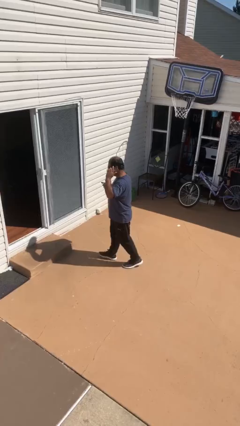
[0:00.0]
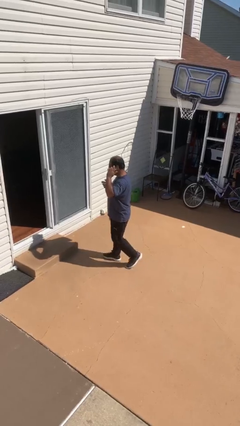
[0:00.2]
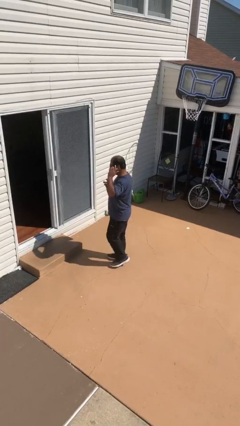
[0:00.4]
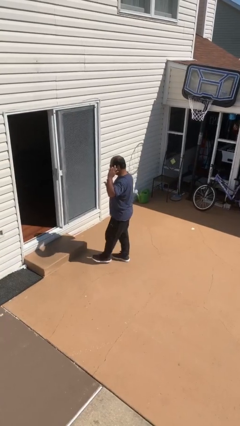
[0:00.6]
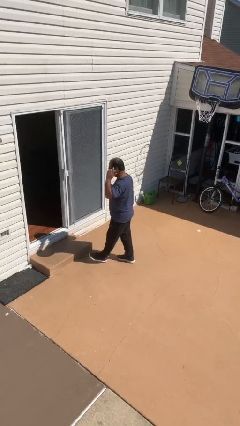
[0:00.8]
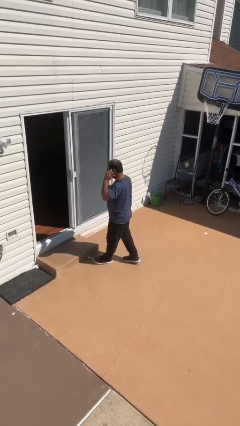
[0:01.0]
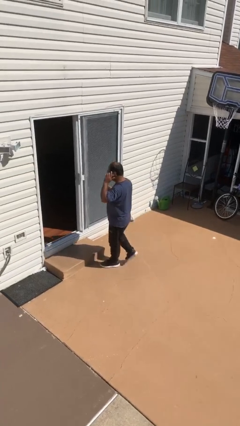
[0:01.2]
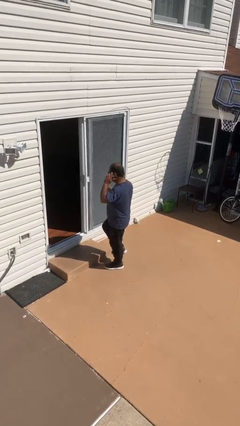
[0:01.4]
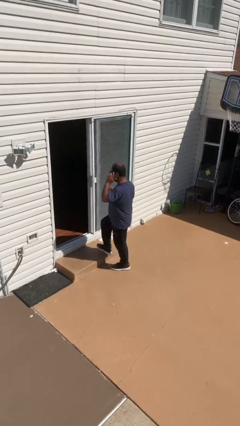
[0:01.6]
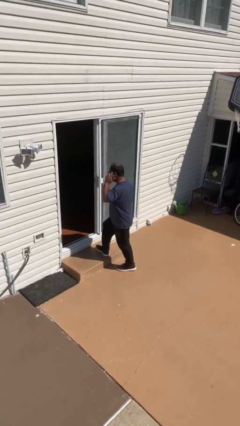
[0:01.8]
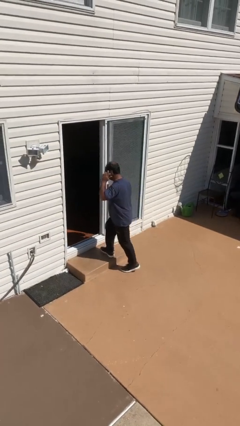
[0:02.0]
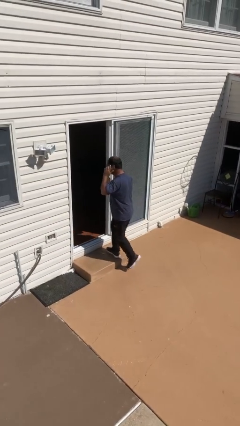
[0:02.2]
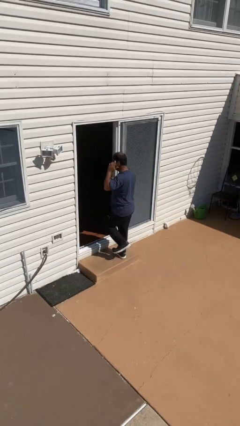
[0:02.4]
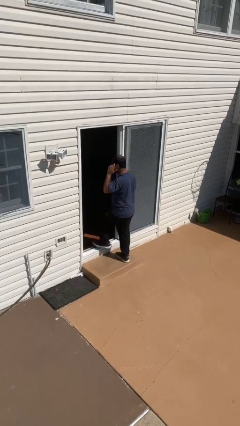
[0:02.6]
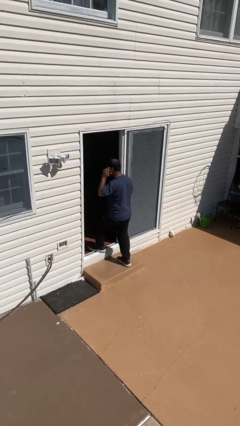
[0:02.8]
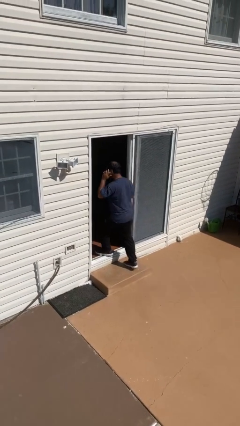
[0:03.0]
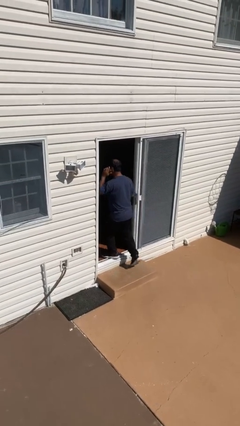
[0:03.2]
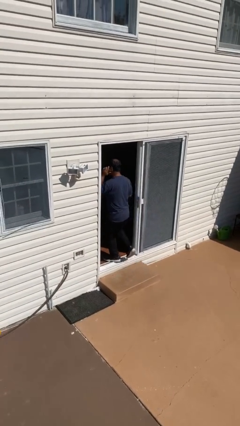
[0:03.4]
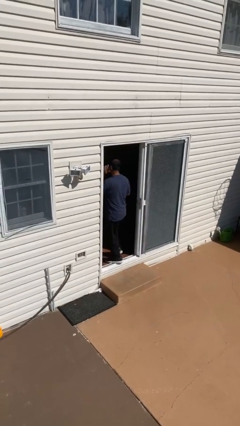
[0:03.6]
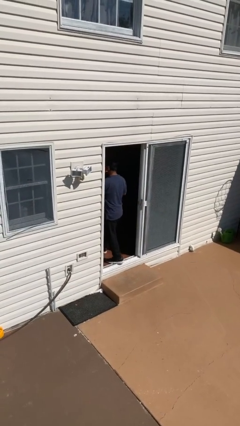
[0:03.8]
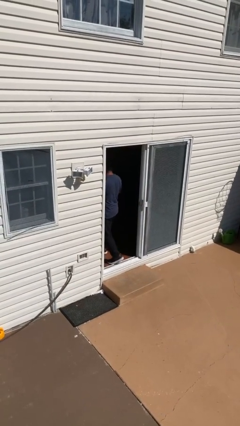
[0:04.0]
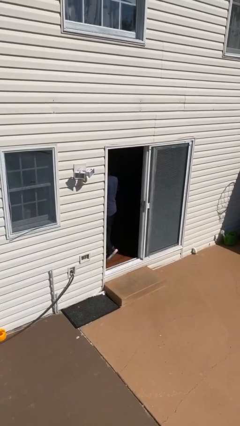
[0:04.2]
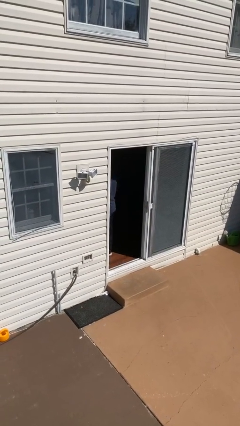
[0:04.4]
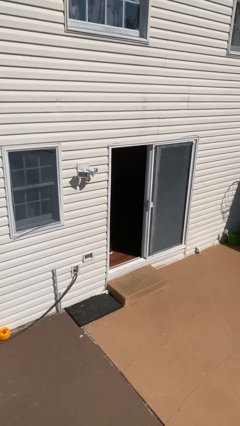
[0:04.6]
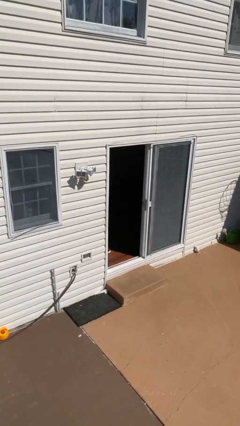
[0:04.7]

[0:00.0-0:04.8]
person exits scene through structure

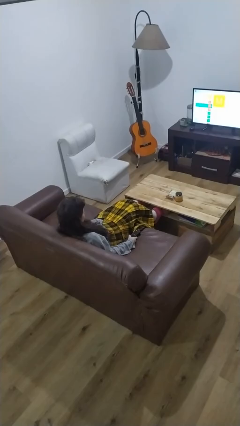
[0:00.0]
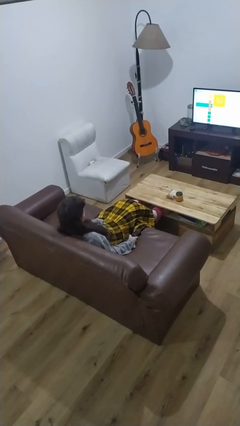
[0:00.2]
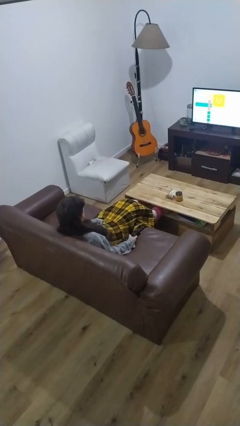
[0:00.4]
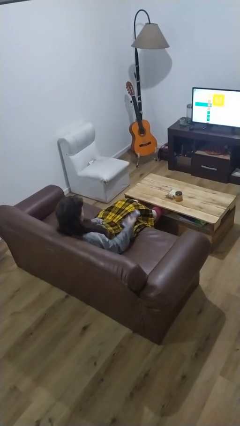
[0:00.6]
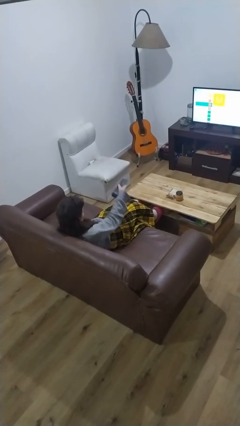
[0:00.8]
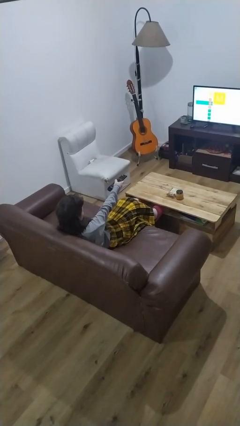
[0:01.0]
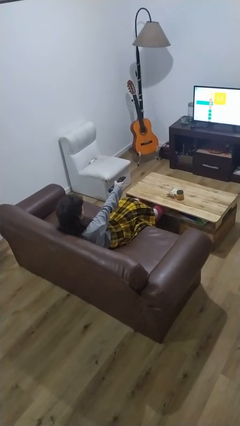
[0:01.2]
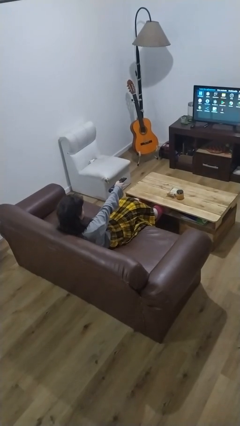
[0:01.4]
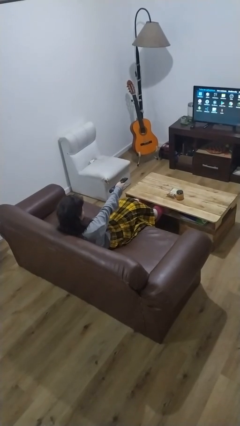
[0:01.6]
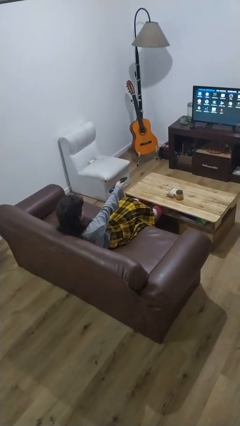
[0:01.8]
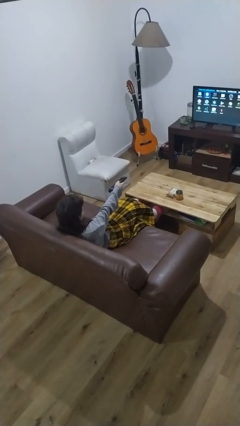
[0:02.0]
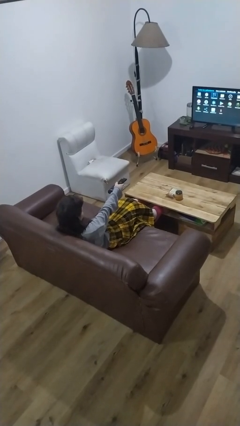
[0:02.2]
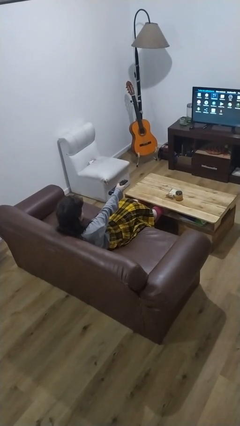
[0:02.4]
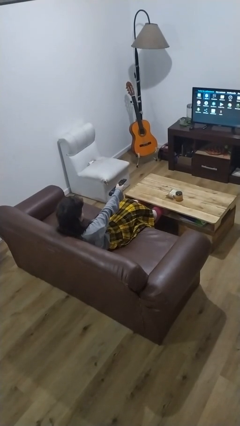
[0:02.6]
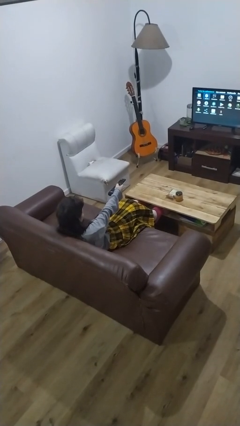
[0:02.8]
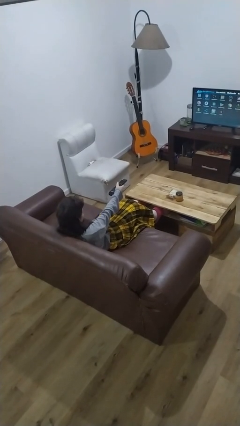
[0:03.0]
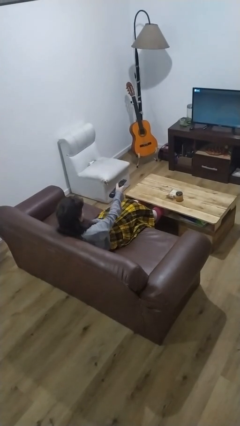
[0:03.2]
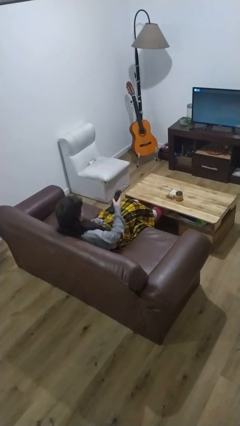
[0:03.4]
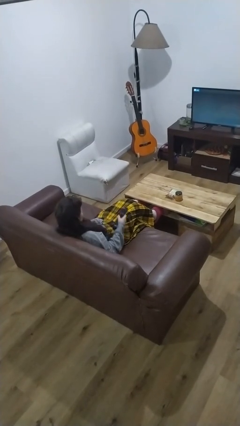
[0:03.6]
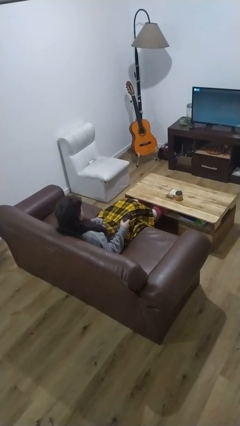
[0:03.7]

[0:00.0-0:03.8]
person uses television remote

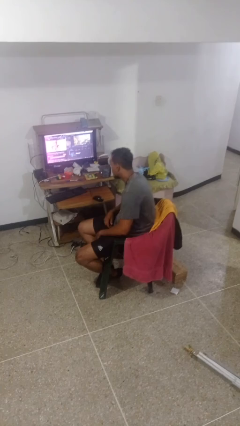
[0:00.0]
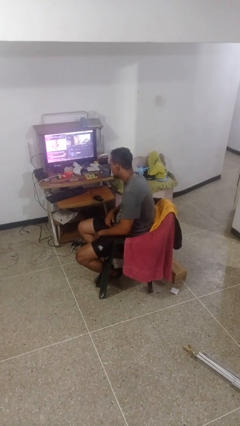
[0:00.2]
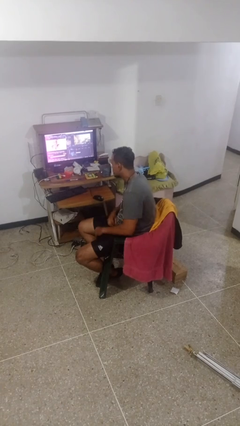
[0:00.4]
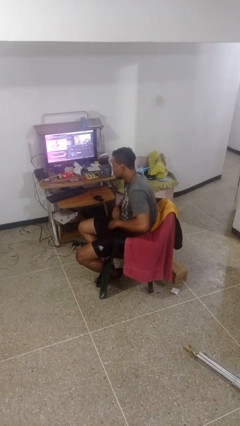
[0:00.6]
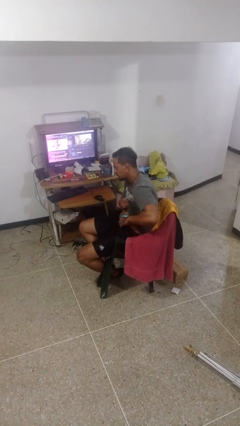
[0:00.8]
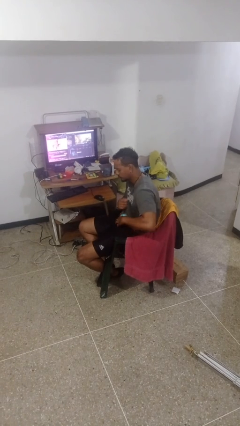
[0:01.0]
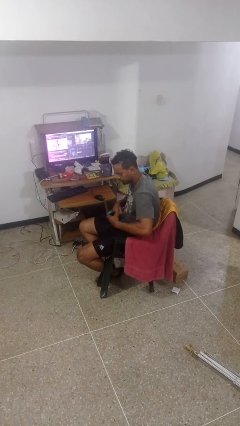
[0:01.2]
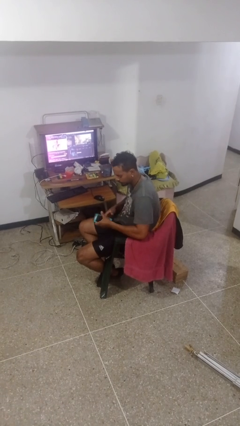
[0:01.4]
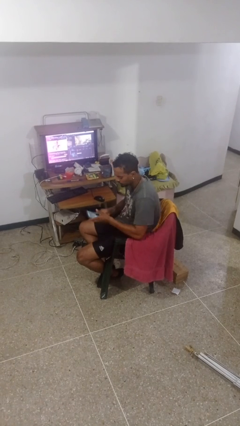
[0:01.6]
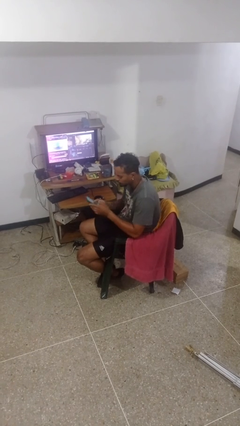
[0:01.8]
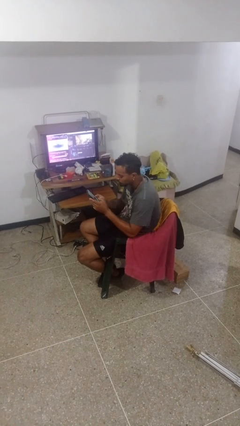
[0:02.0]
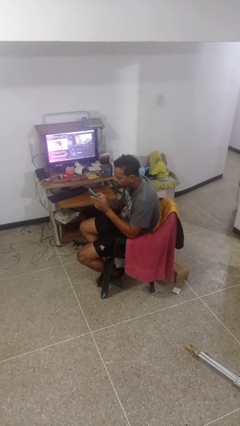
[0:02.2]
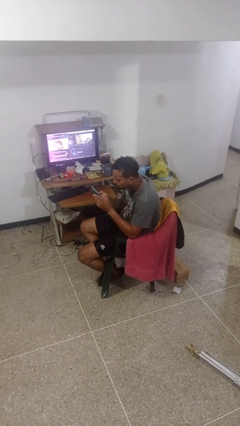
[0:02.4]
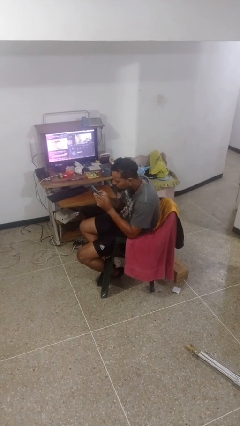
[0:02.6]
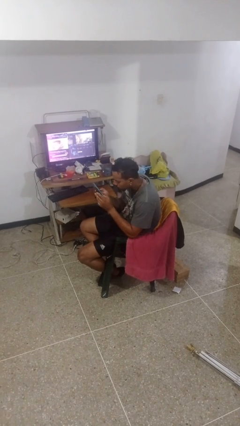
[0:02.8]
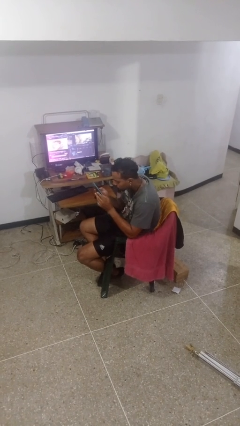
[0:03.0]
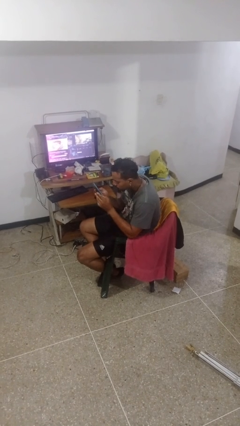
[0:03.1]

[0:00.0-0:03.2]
person takes phone from pocket

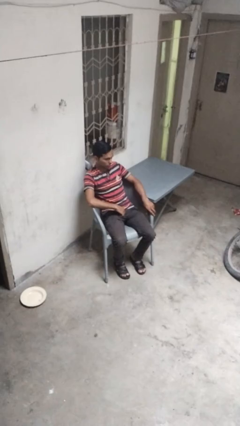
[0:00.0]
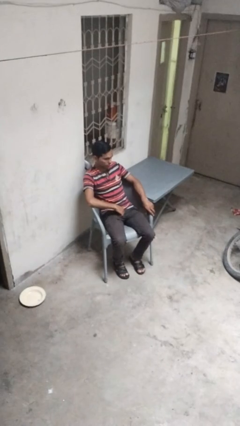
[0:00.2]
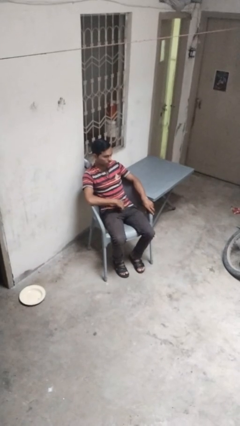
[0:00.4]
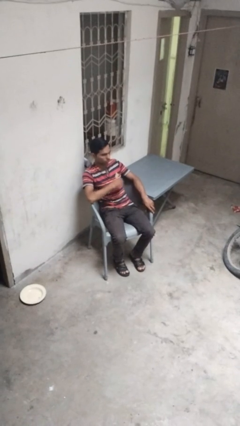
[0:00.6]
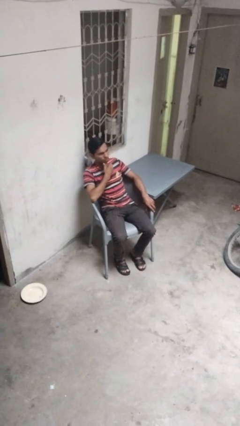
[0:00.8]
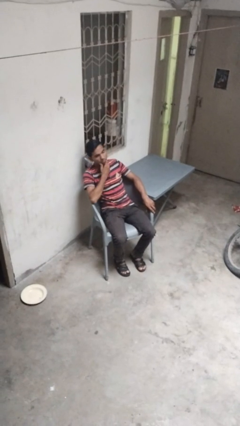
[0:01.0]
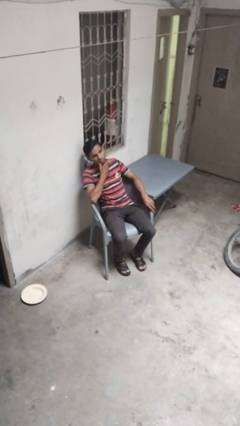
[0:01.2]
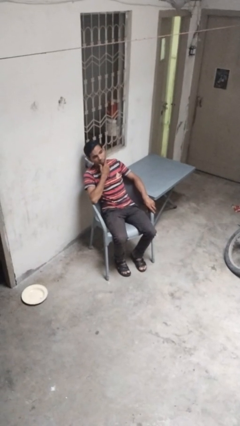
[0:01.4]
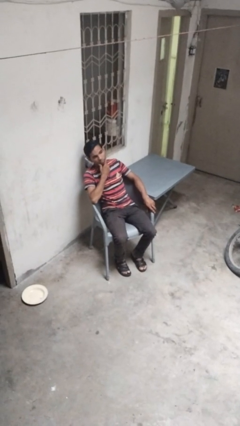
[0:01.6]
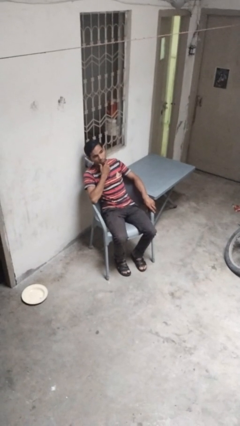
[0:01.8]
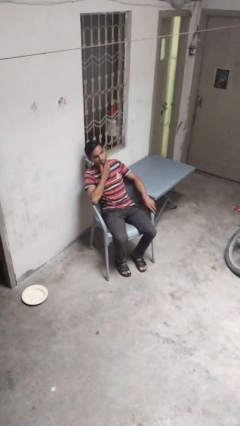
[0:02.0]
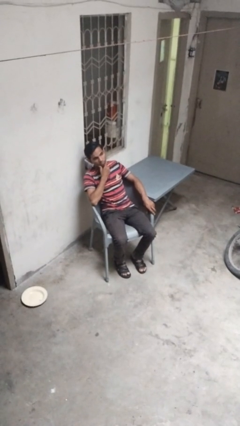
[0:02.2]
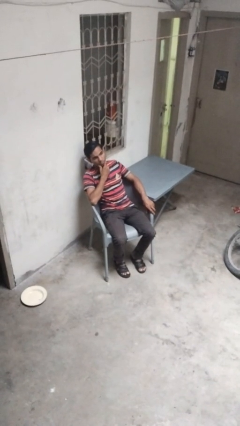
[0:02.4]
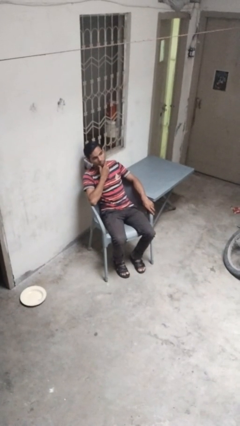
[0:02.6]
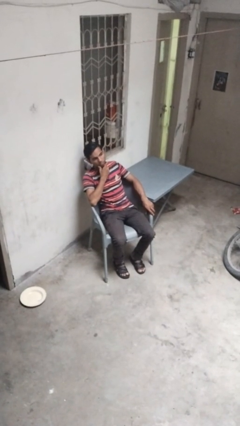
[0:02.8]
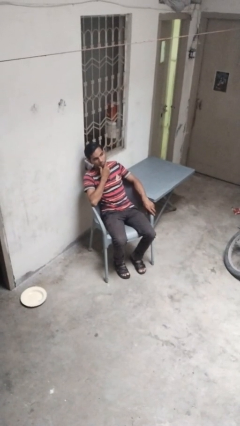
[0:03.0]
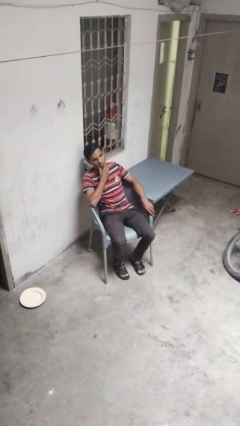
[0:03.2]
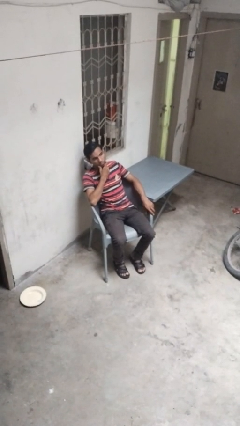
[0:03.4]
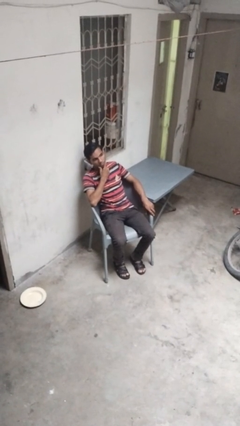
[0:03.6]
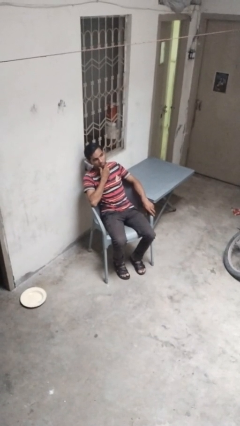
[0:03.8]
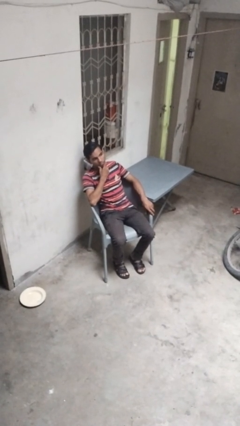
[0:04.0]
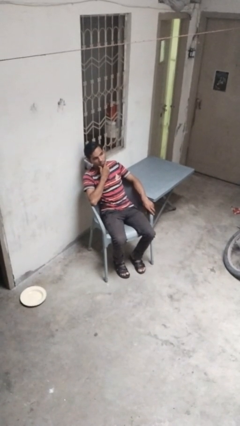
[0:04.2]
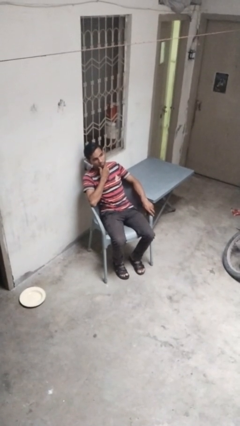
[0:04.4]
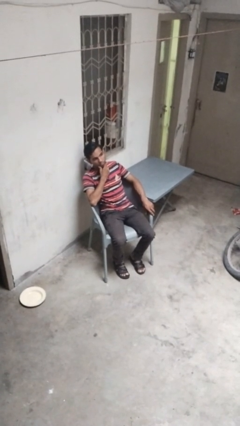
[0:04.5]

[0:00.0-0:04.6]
person strokes chin

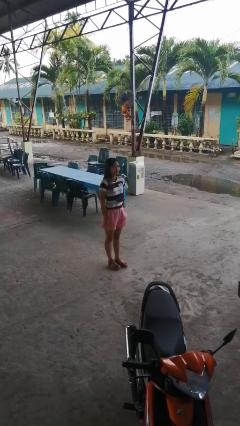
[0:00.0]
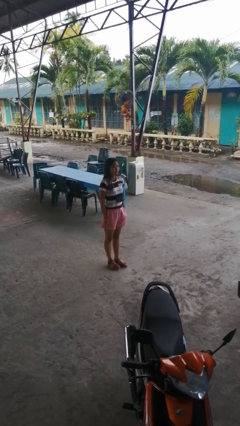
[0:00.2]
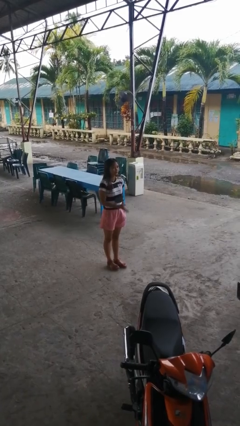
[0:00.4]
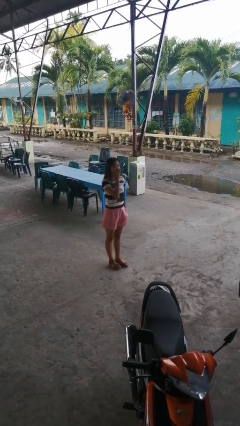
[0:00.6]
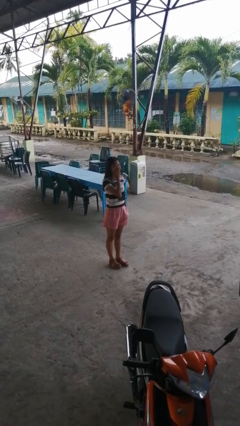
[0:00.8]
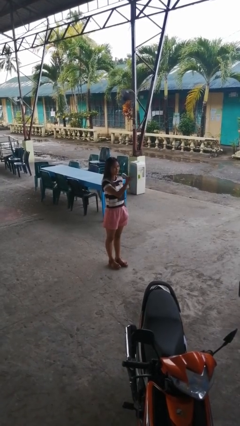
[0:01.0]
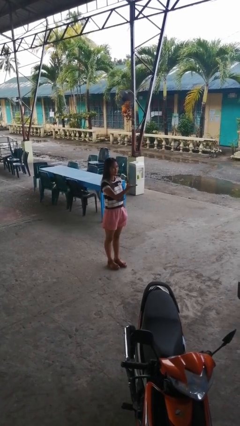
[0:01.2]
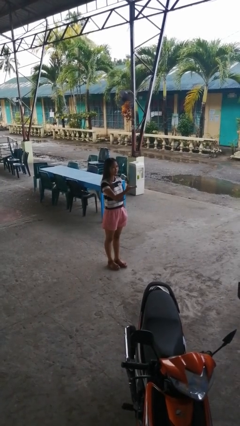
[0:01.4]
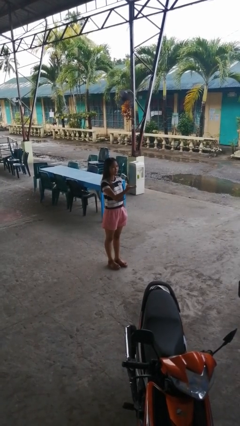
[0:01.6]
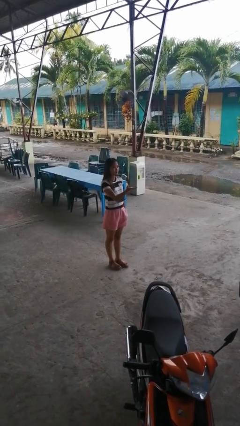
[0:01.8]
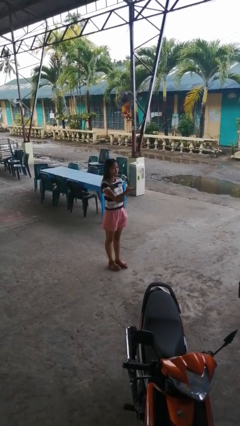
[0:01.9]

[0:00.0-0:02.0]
person gestures blow kiss
